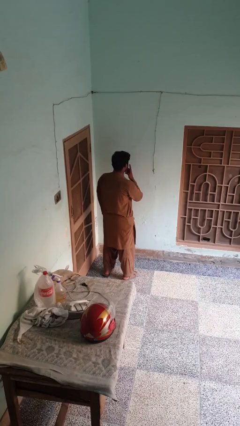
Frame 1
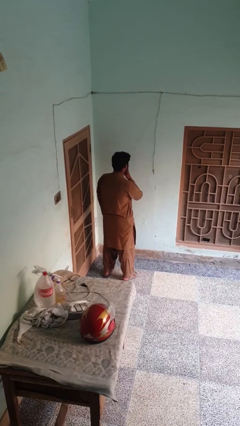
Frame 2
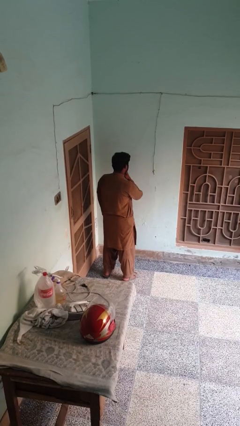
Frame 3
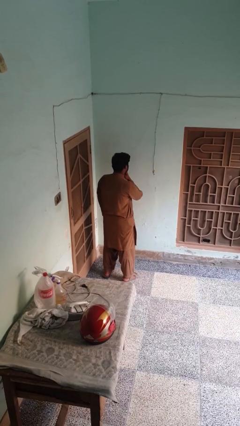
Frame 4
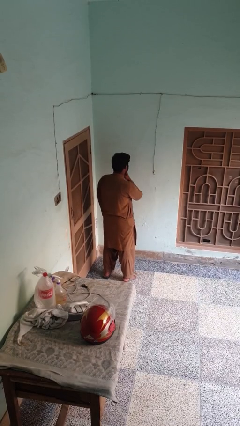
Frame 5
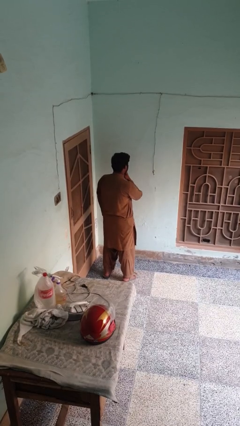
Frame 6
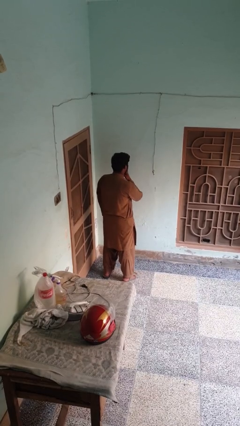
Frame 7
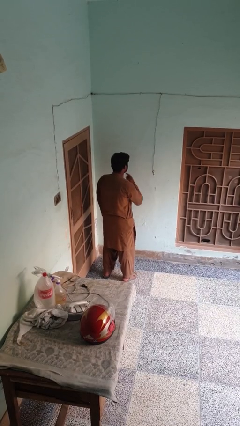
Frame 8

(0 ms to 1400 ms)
person gestures be quiet

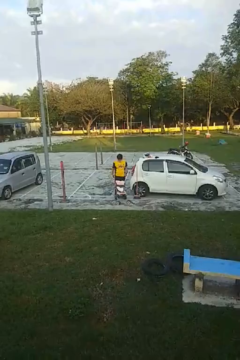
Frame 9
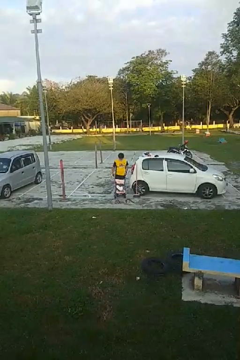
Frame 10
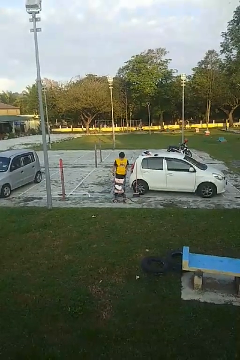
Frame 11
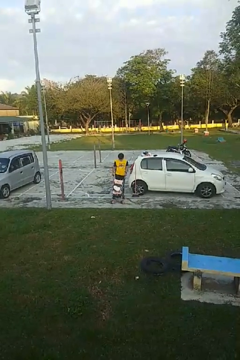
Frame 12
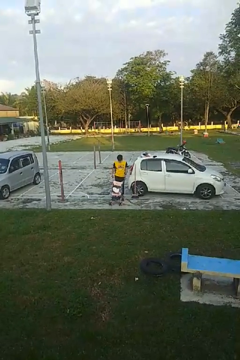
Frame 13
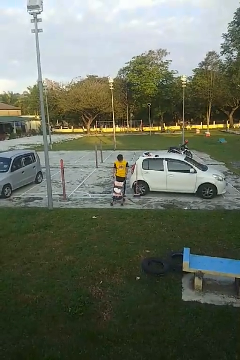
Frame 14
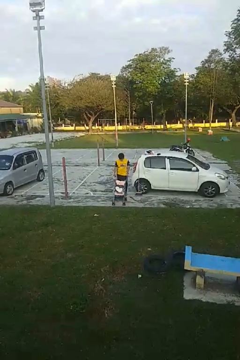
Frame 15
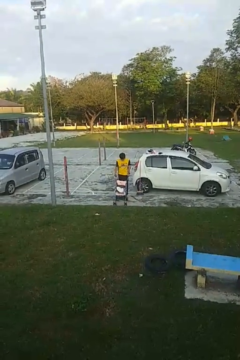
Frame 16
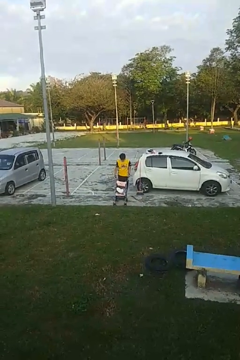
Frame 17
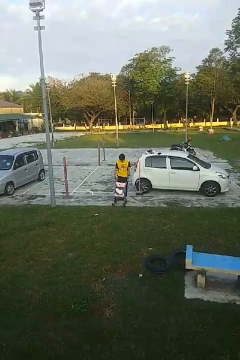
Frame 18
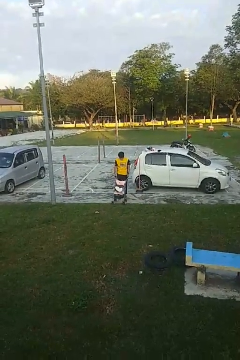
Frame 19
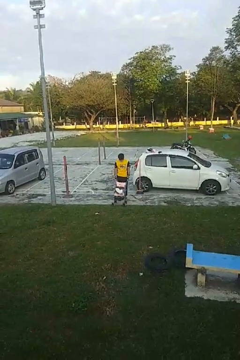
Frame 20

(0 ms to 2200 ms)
person pushes wheeled cart

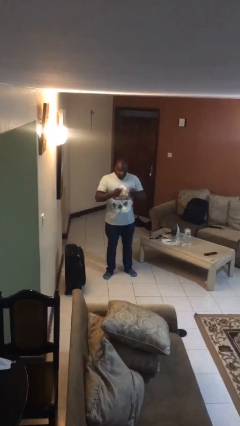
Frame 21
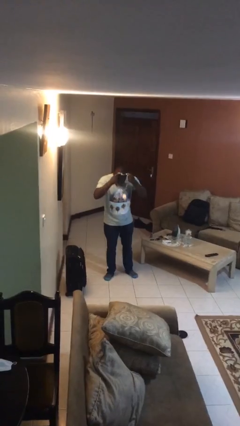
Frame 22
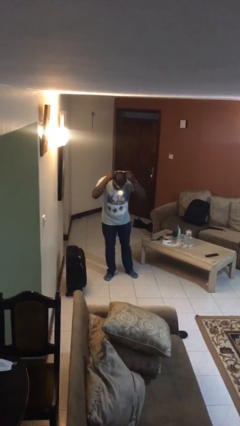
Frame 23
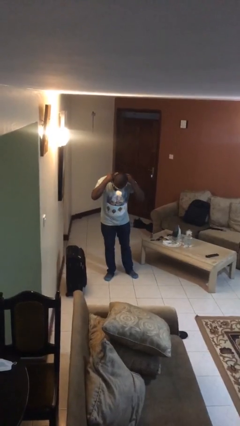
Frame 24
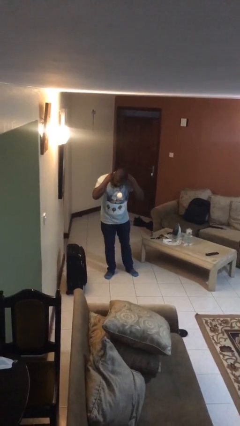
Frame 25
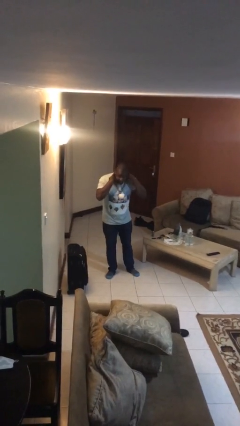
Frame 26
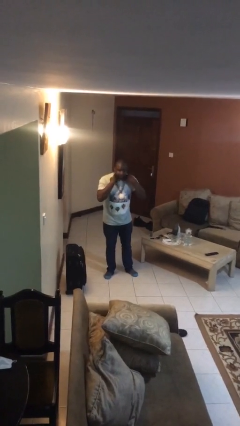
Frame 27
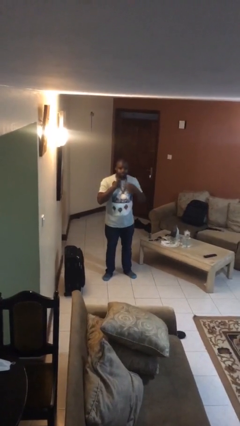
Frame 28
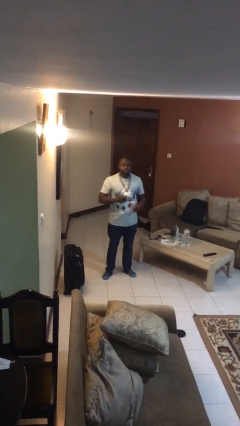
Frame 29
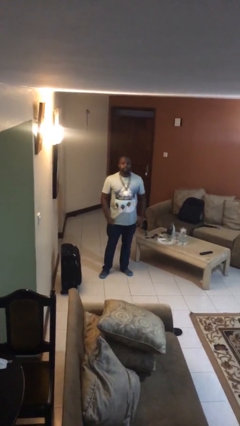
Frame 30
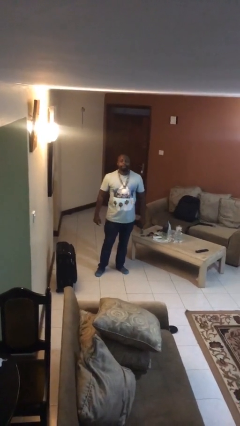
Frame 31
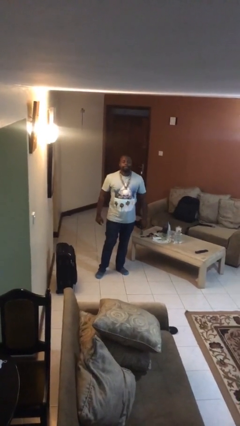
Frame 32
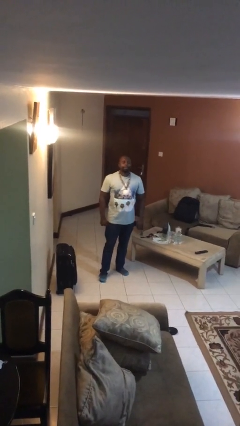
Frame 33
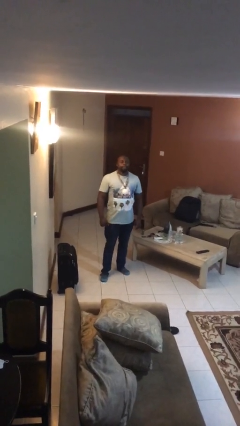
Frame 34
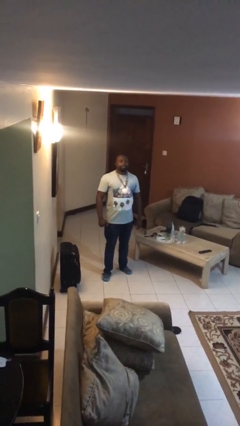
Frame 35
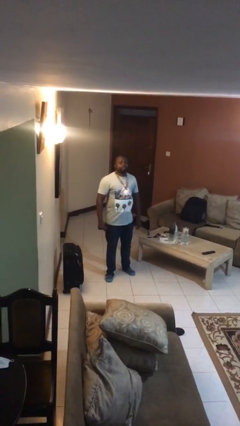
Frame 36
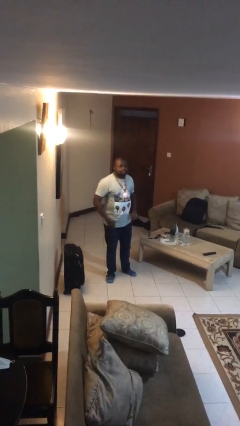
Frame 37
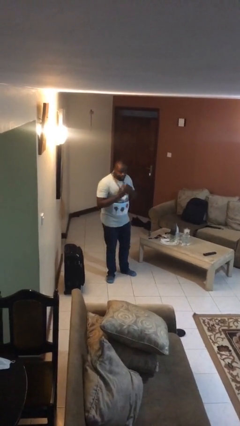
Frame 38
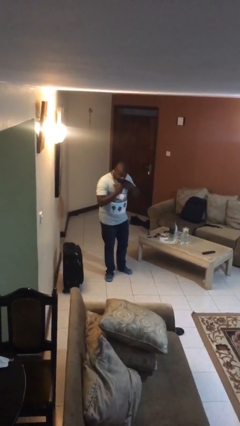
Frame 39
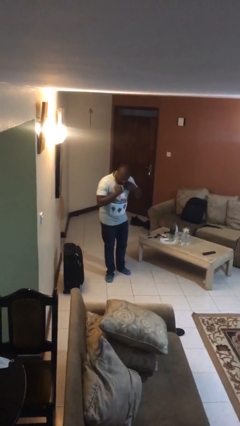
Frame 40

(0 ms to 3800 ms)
person puts on necklace

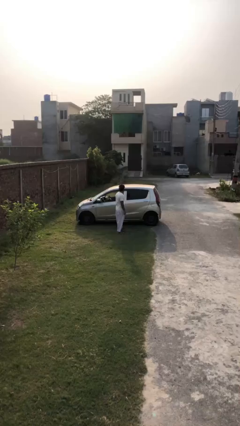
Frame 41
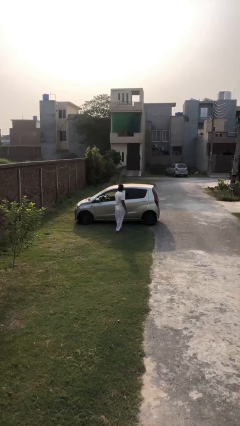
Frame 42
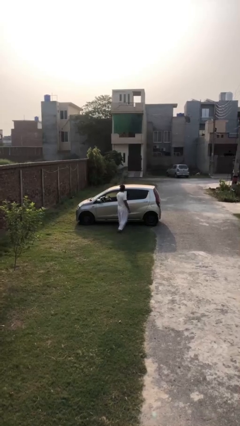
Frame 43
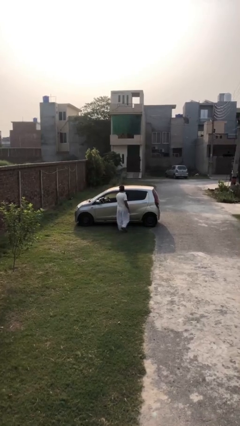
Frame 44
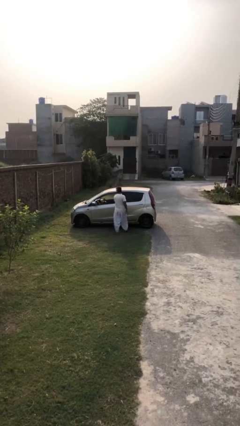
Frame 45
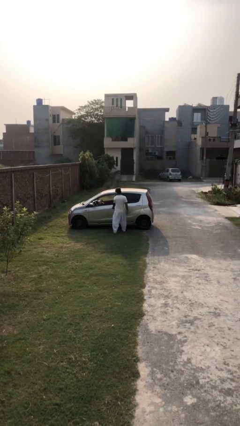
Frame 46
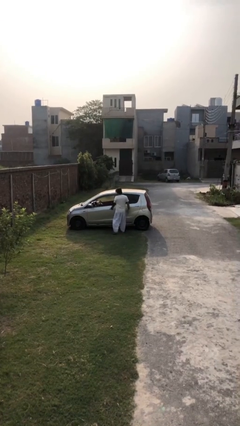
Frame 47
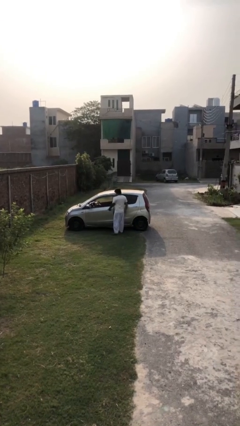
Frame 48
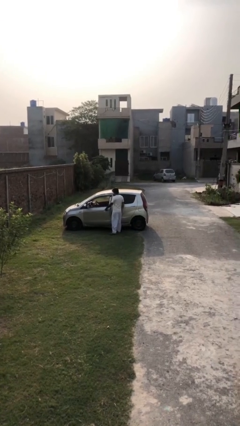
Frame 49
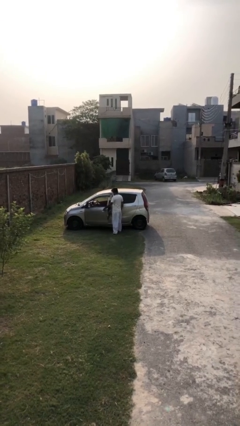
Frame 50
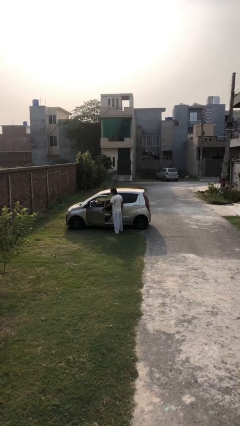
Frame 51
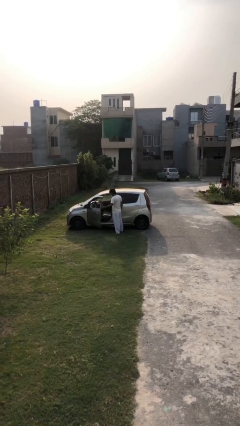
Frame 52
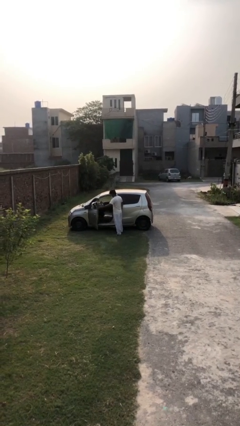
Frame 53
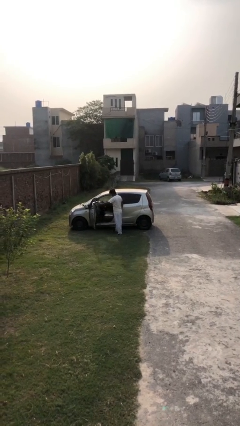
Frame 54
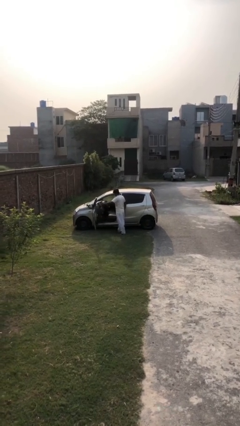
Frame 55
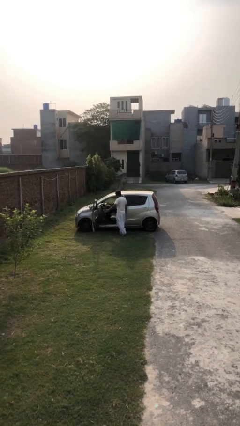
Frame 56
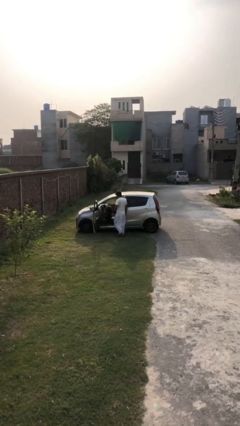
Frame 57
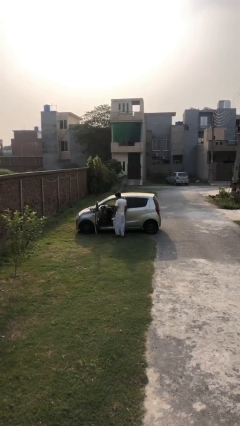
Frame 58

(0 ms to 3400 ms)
person opens car door

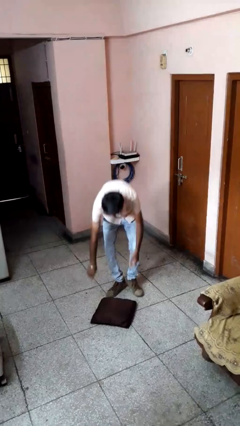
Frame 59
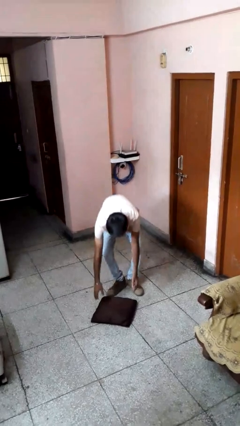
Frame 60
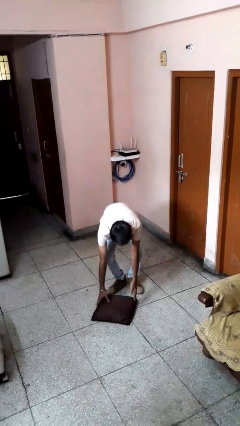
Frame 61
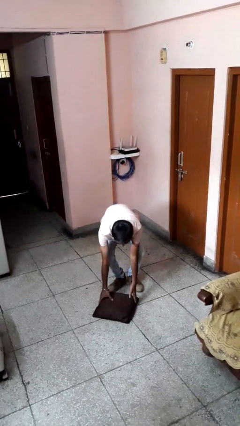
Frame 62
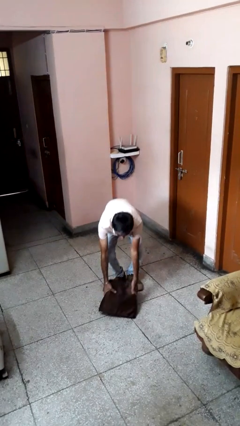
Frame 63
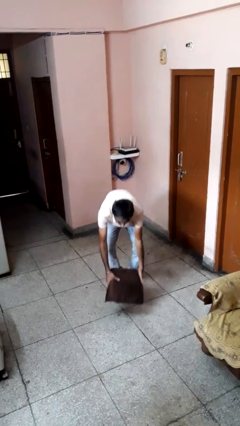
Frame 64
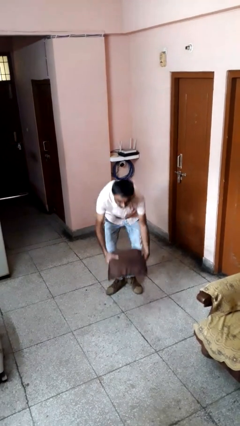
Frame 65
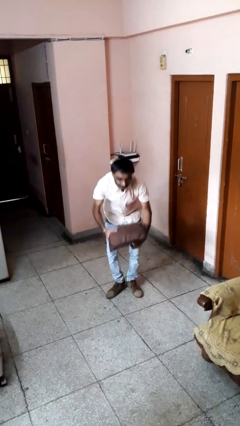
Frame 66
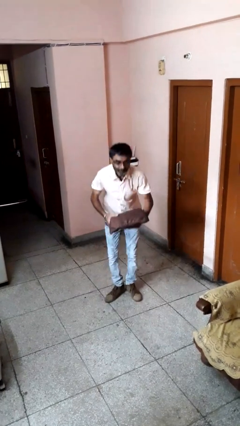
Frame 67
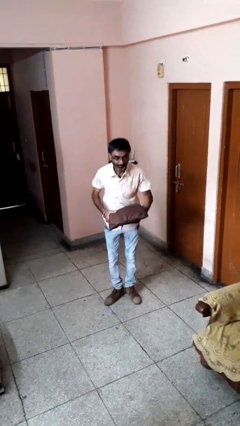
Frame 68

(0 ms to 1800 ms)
person picks up object from floor

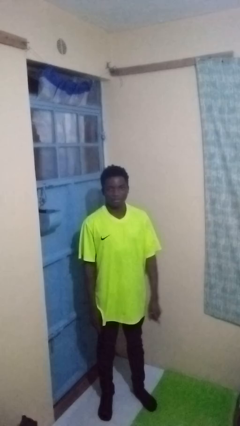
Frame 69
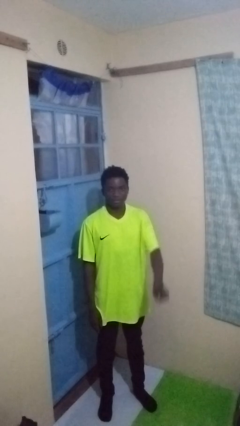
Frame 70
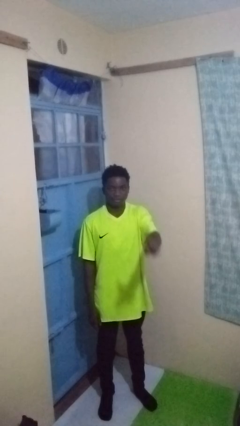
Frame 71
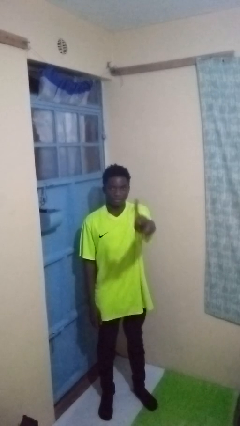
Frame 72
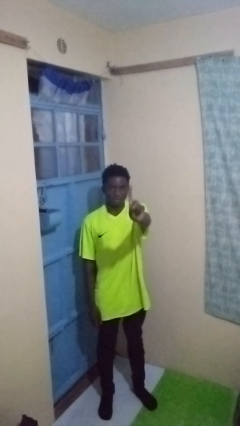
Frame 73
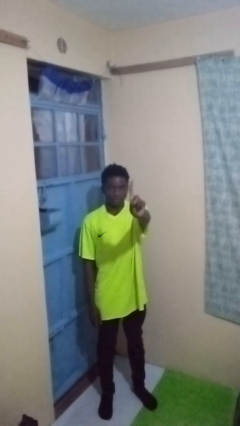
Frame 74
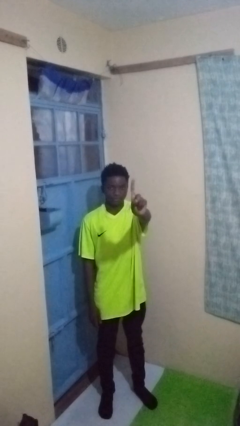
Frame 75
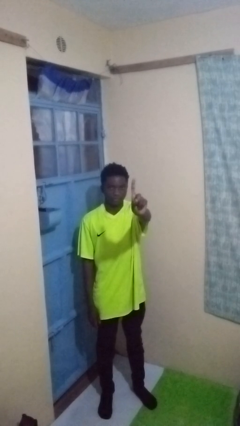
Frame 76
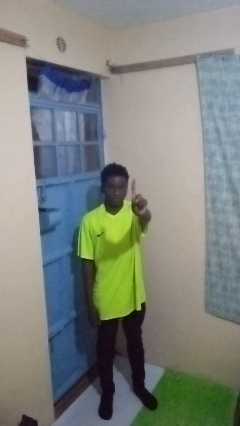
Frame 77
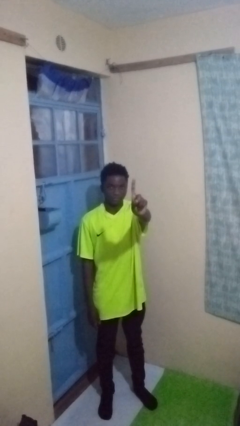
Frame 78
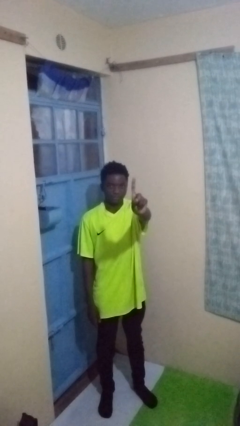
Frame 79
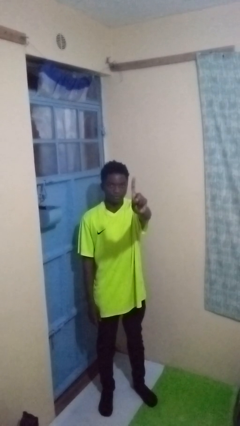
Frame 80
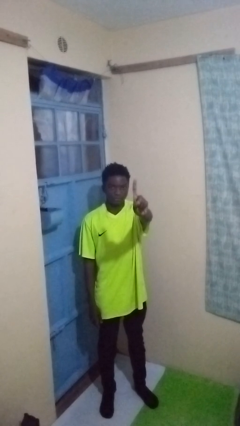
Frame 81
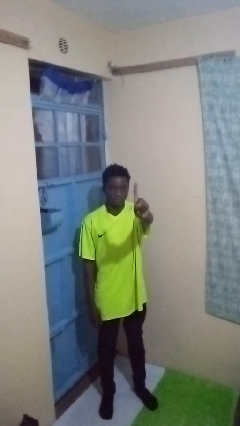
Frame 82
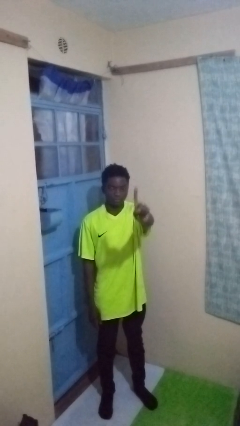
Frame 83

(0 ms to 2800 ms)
person gestures number one

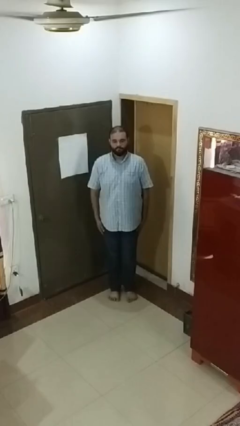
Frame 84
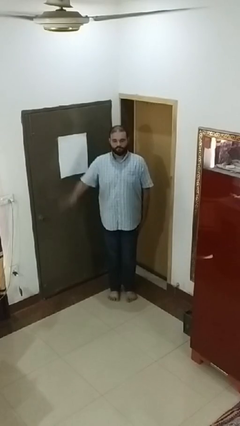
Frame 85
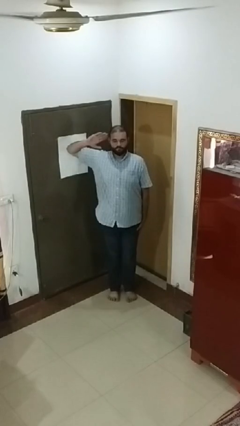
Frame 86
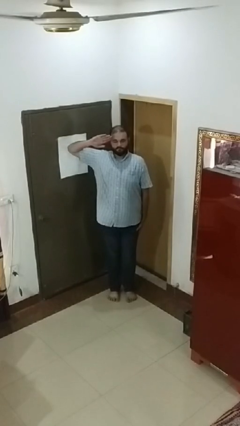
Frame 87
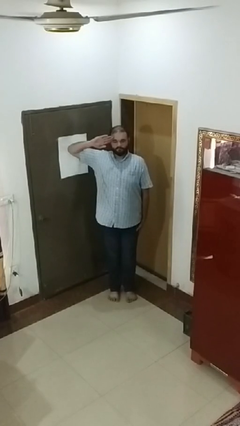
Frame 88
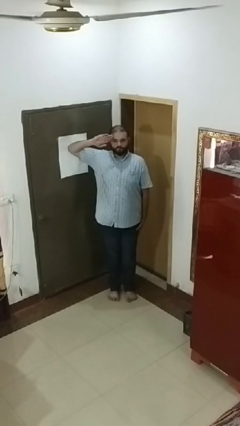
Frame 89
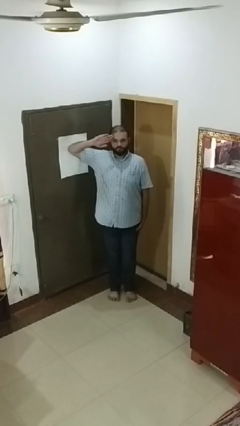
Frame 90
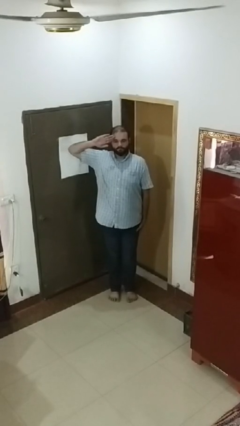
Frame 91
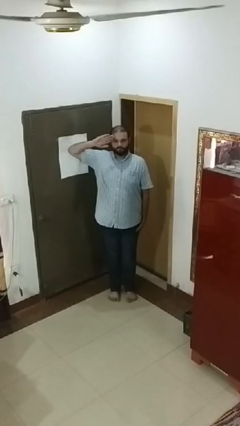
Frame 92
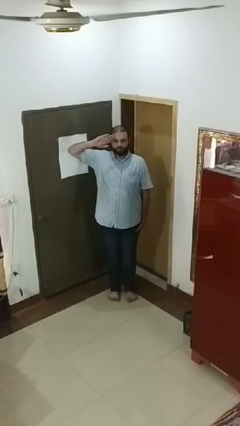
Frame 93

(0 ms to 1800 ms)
person salutes

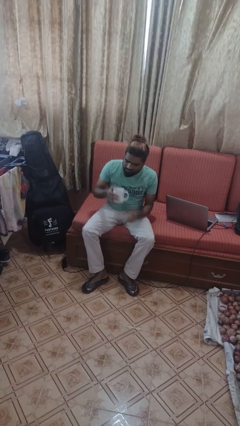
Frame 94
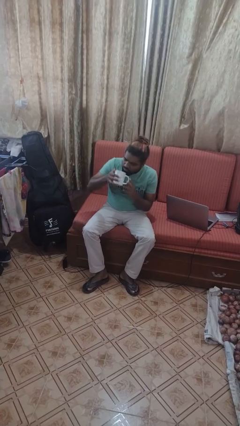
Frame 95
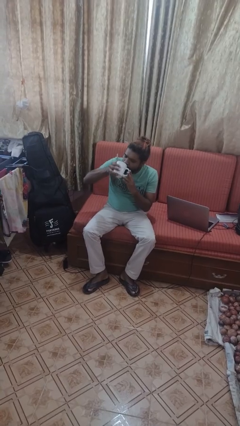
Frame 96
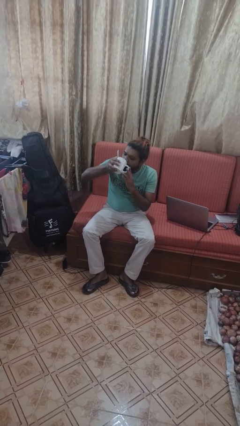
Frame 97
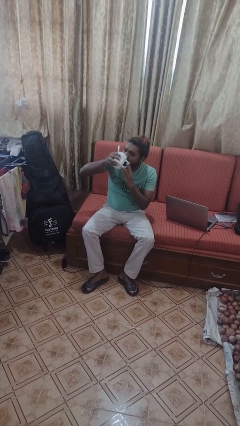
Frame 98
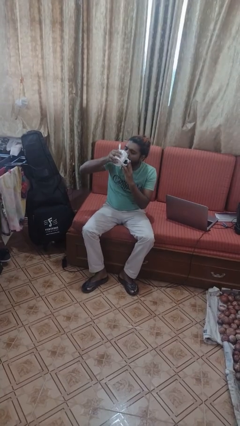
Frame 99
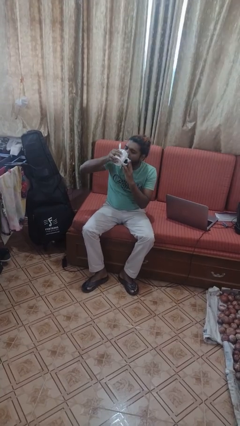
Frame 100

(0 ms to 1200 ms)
person drinks from mug
